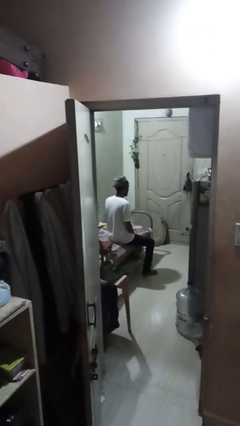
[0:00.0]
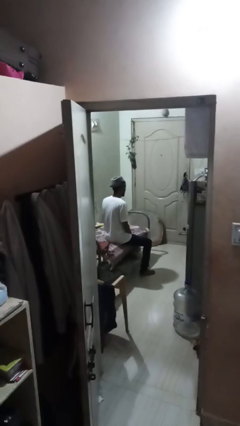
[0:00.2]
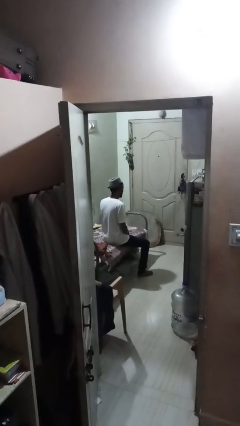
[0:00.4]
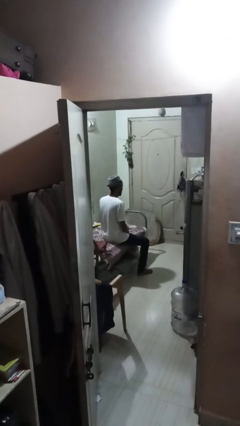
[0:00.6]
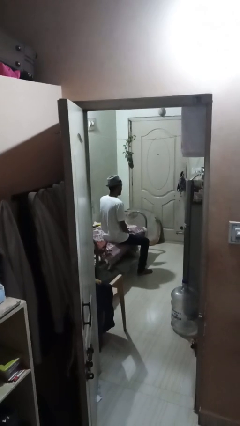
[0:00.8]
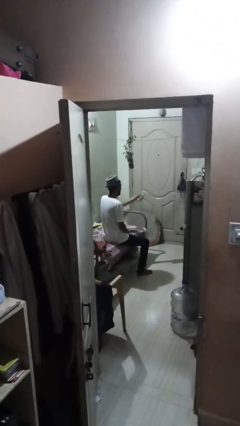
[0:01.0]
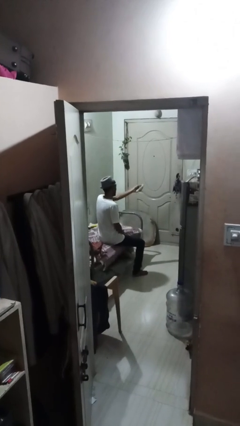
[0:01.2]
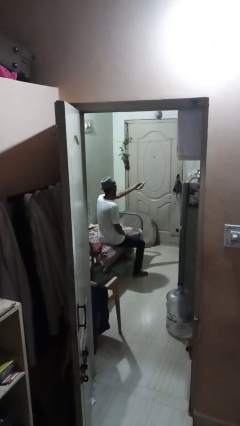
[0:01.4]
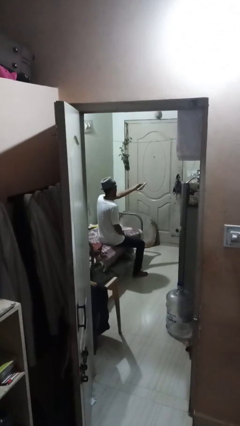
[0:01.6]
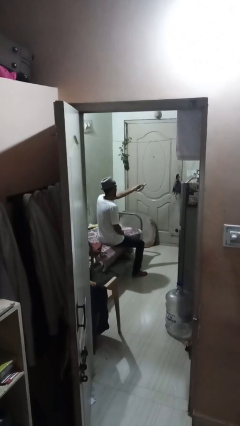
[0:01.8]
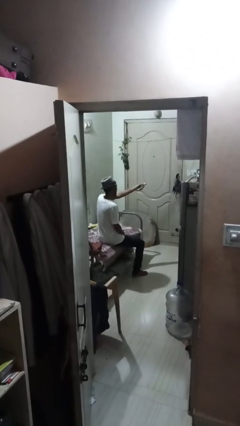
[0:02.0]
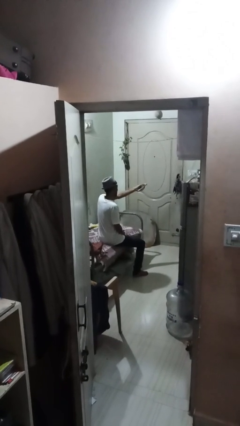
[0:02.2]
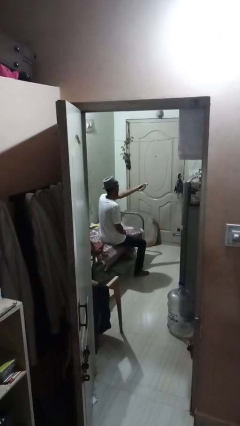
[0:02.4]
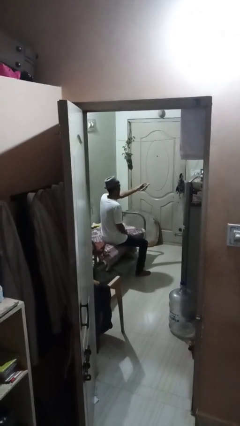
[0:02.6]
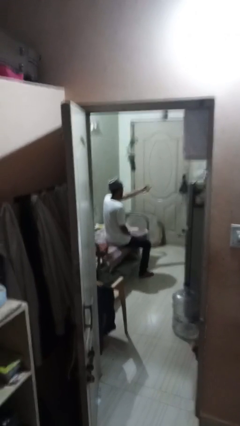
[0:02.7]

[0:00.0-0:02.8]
person uses television remote

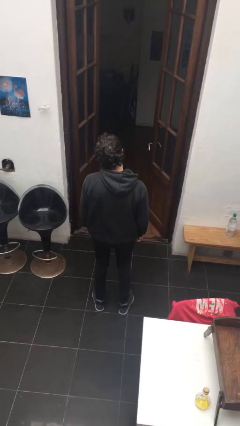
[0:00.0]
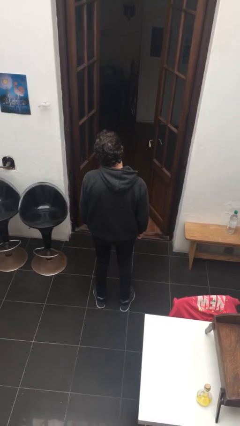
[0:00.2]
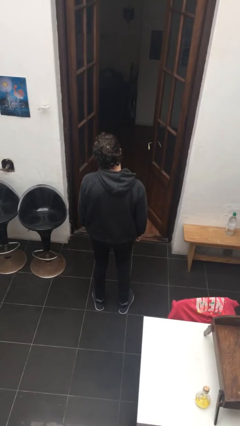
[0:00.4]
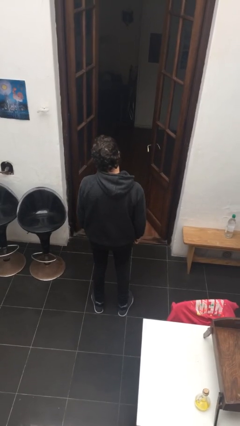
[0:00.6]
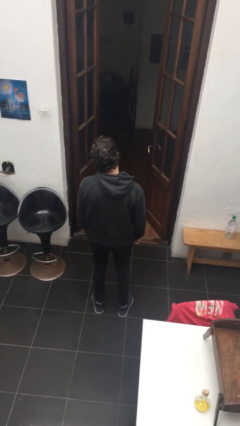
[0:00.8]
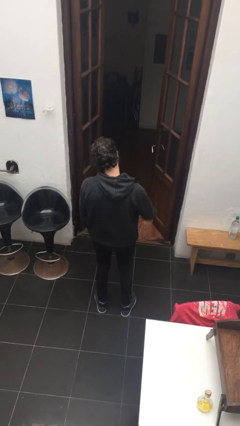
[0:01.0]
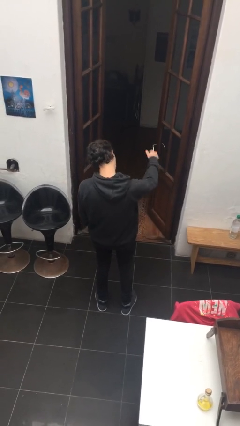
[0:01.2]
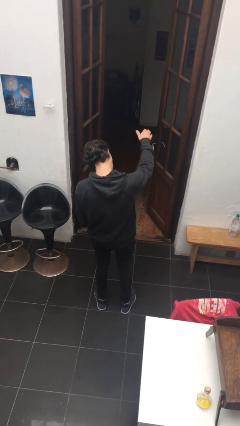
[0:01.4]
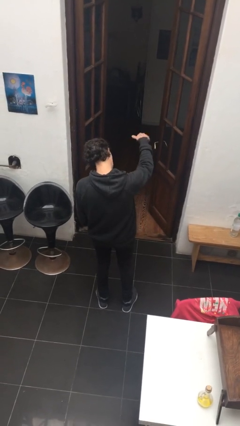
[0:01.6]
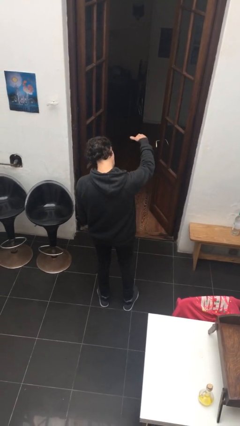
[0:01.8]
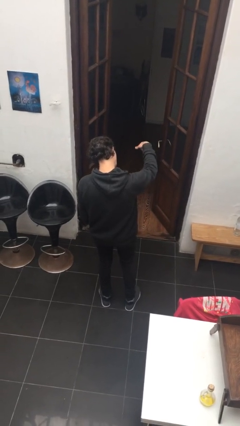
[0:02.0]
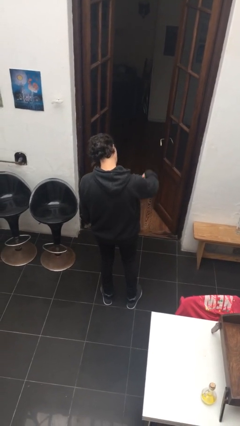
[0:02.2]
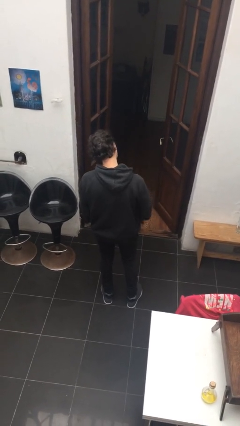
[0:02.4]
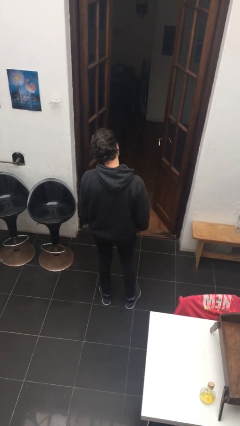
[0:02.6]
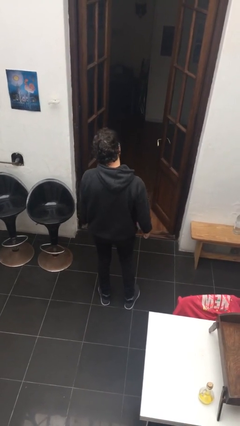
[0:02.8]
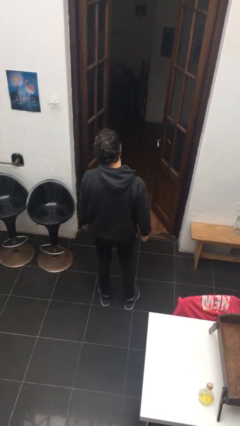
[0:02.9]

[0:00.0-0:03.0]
person gestures come here

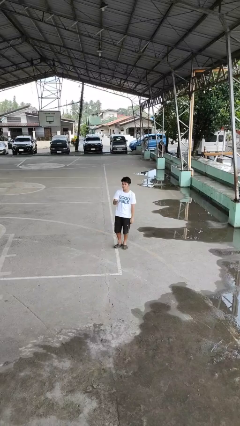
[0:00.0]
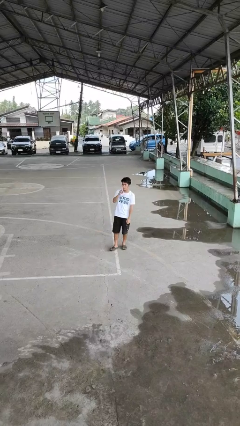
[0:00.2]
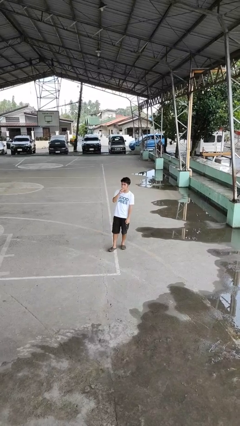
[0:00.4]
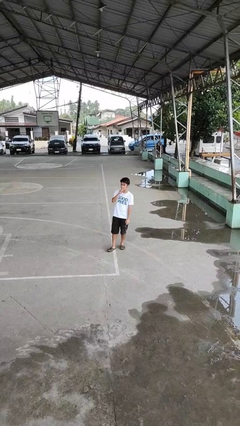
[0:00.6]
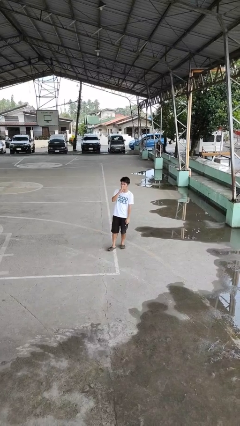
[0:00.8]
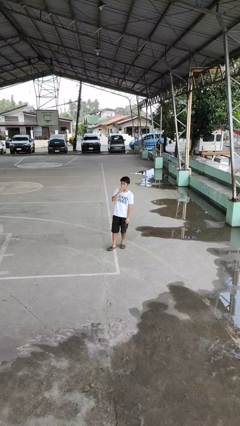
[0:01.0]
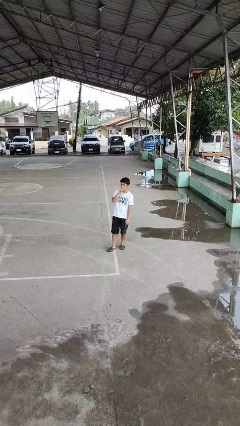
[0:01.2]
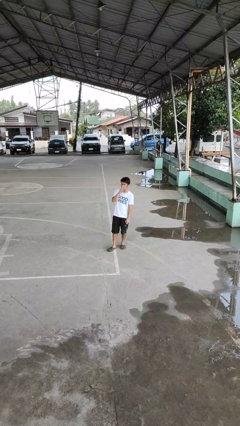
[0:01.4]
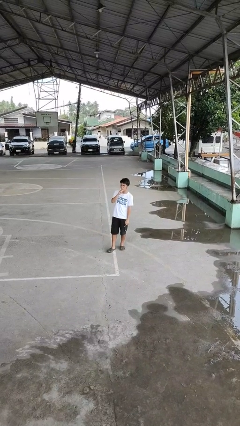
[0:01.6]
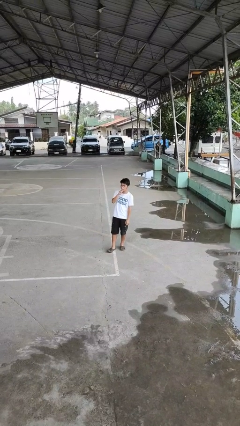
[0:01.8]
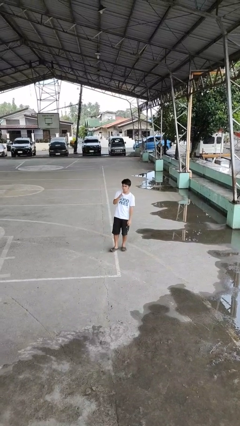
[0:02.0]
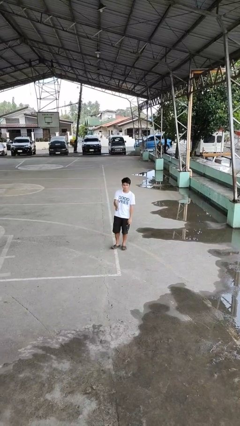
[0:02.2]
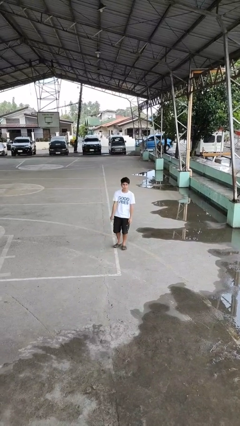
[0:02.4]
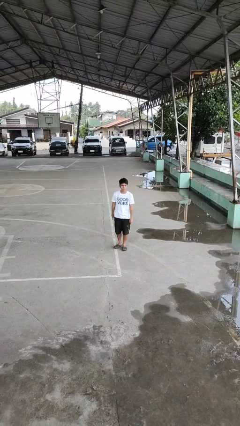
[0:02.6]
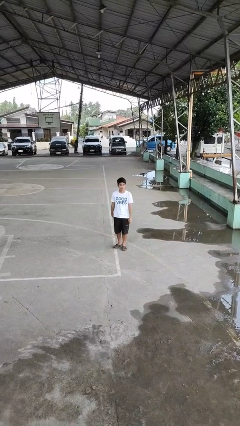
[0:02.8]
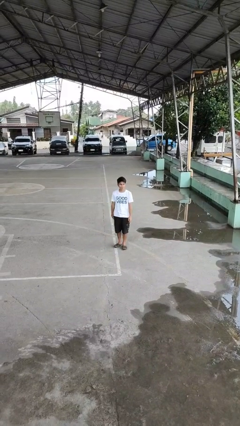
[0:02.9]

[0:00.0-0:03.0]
person gestures be quiet

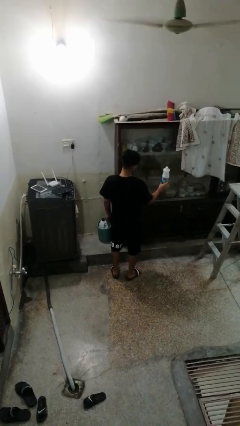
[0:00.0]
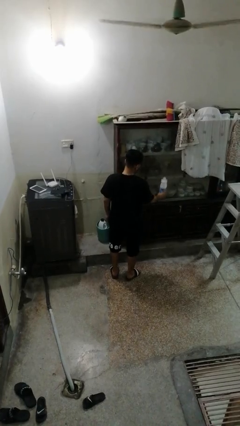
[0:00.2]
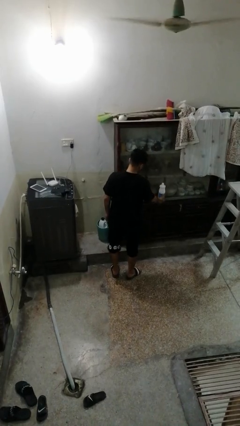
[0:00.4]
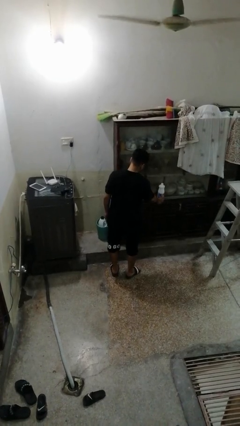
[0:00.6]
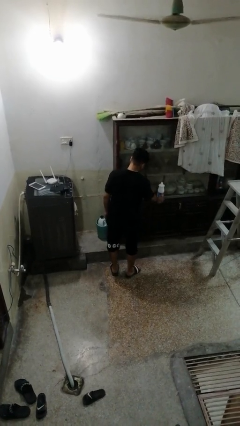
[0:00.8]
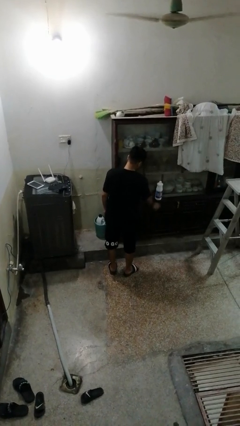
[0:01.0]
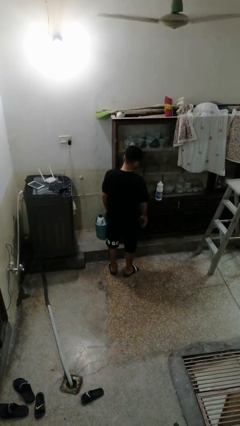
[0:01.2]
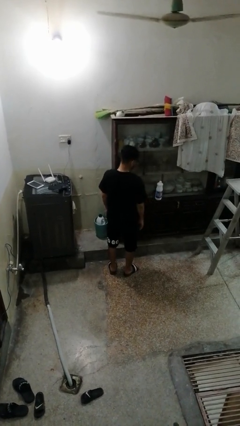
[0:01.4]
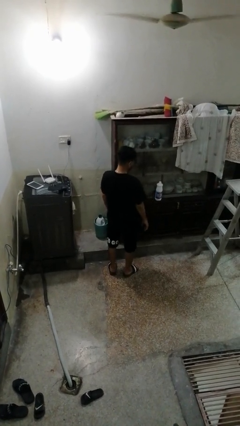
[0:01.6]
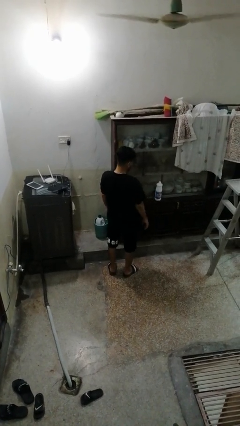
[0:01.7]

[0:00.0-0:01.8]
person puts down object on shelf

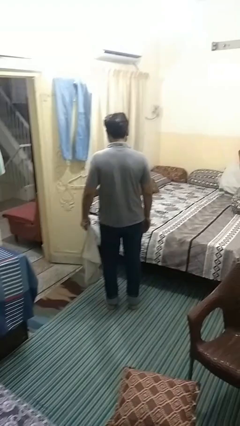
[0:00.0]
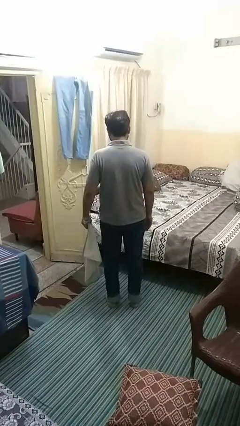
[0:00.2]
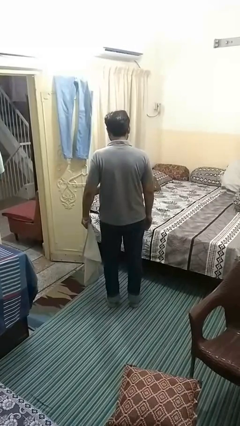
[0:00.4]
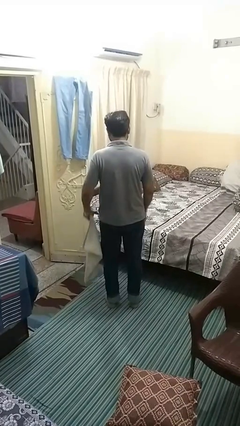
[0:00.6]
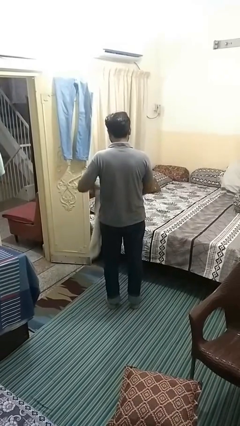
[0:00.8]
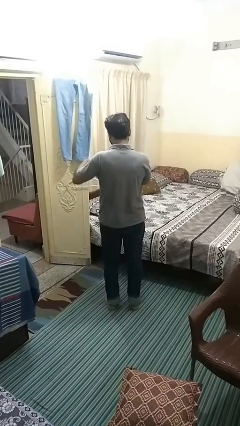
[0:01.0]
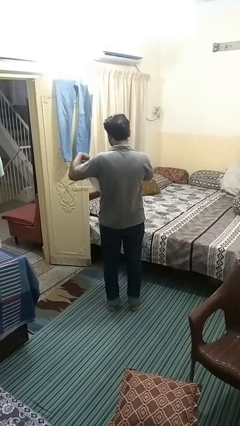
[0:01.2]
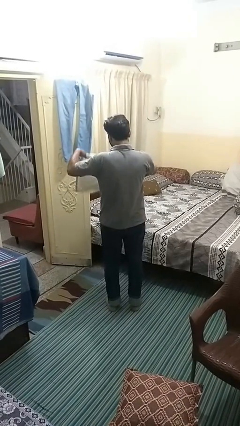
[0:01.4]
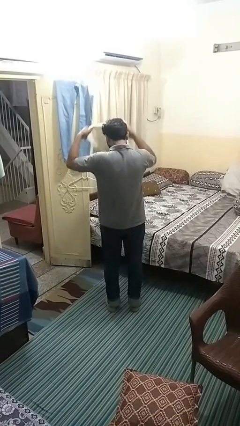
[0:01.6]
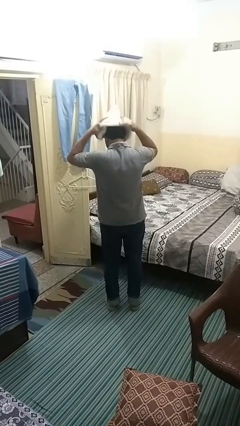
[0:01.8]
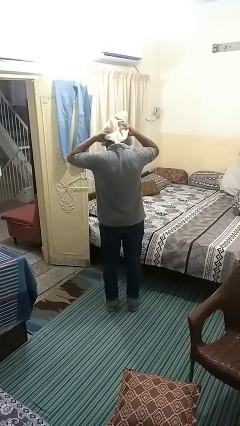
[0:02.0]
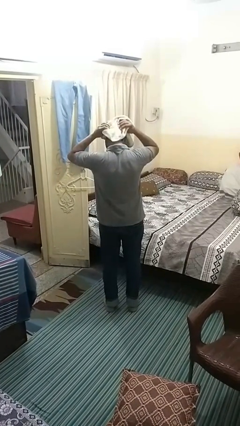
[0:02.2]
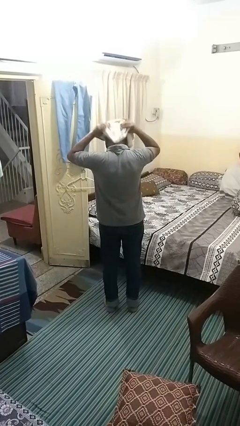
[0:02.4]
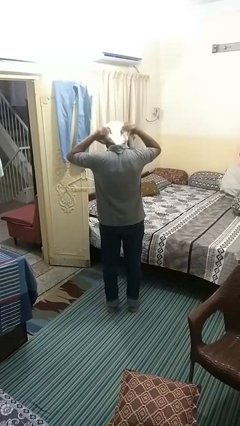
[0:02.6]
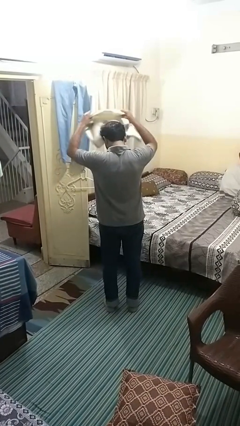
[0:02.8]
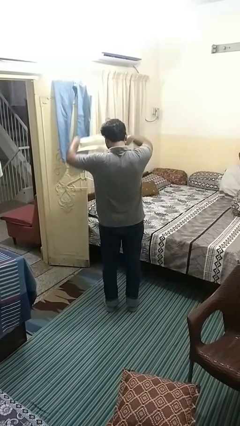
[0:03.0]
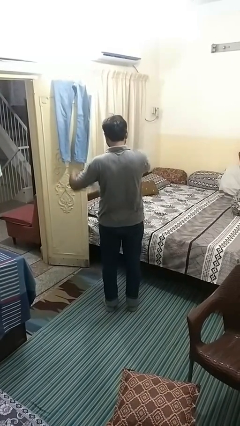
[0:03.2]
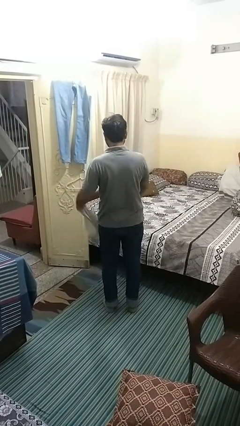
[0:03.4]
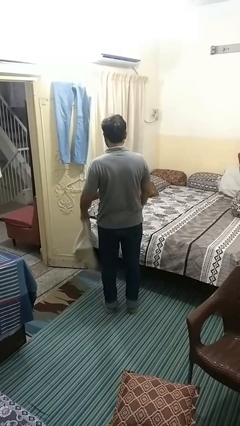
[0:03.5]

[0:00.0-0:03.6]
person dries hair with towel

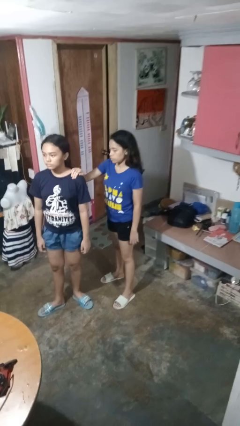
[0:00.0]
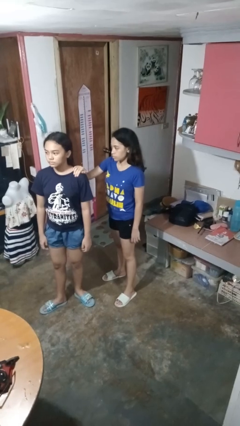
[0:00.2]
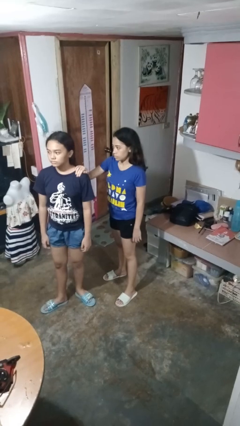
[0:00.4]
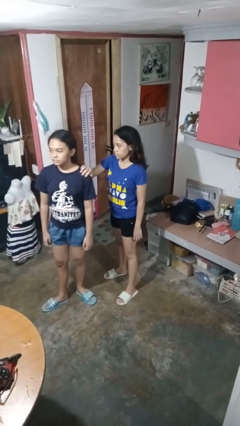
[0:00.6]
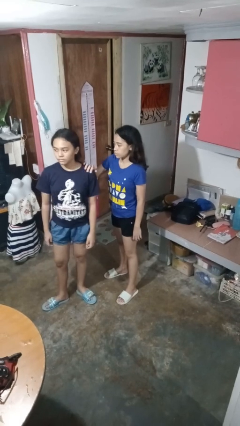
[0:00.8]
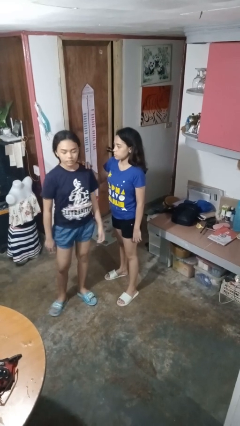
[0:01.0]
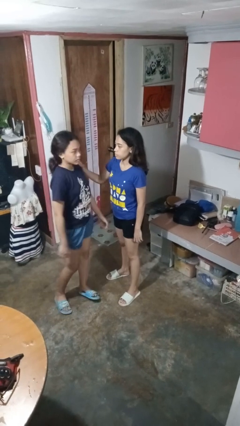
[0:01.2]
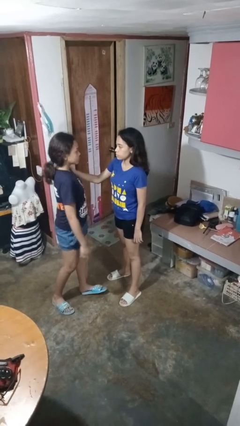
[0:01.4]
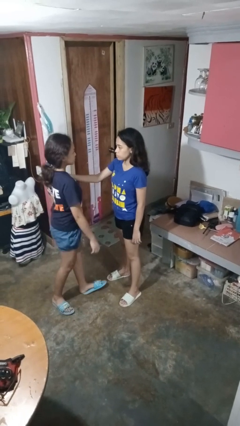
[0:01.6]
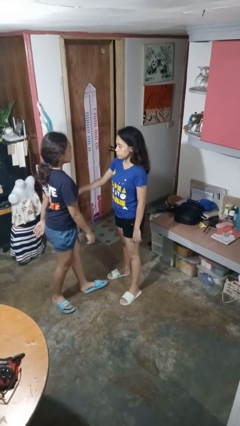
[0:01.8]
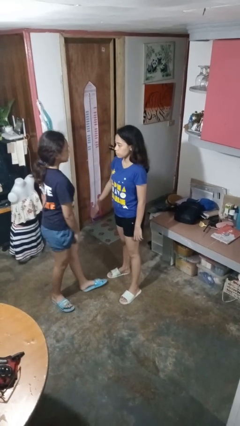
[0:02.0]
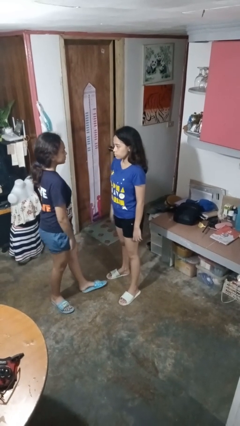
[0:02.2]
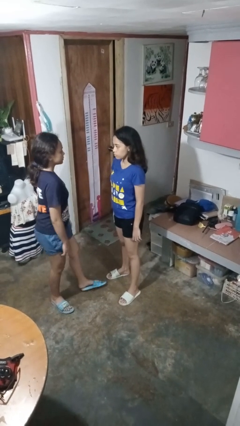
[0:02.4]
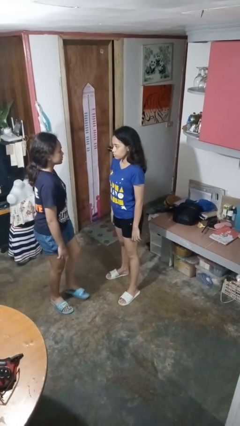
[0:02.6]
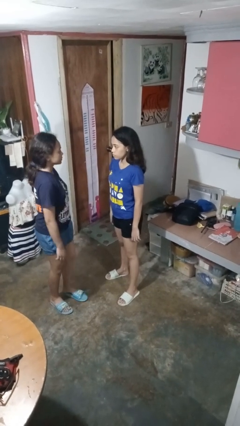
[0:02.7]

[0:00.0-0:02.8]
person spins person around
